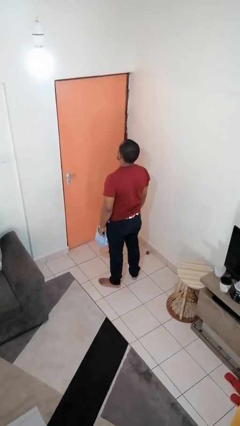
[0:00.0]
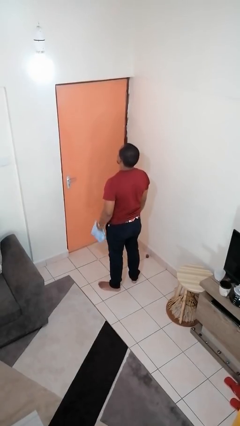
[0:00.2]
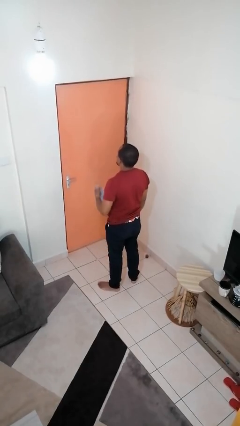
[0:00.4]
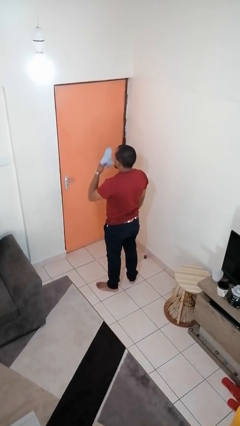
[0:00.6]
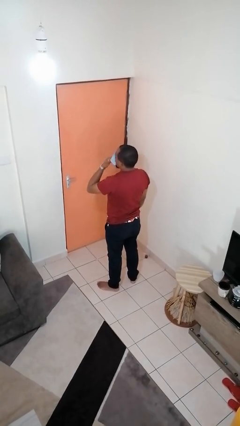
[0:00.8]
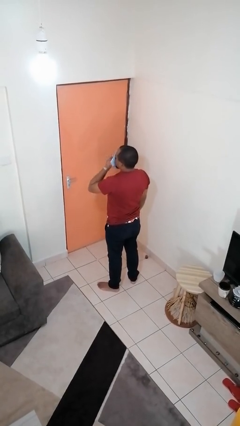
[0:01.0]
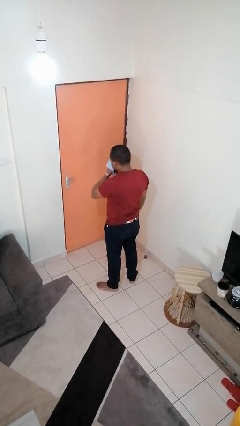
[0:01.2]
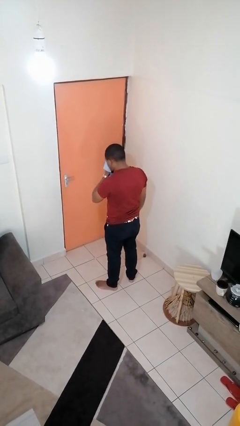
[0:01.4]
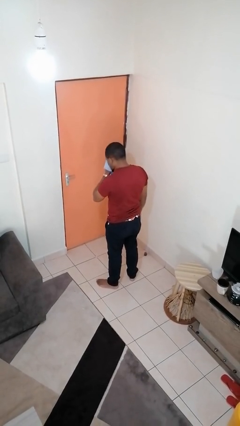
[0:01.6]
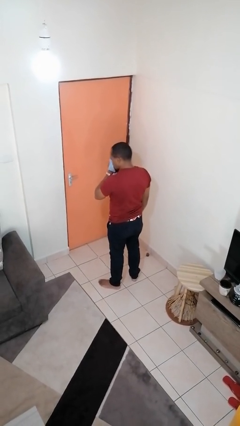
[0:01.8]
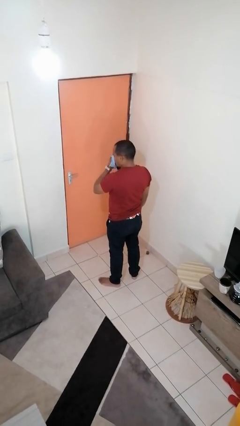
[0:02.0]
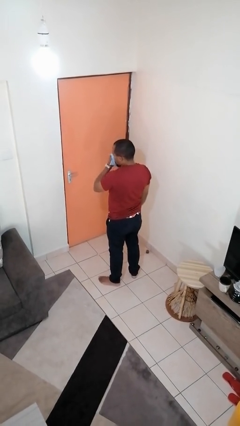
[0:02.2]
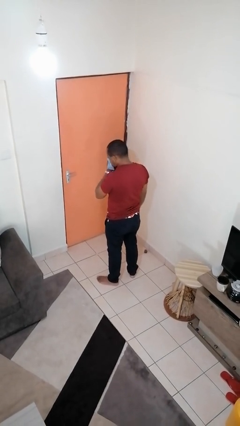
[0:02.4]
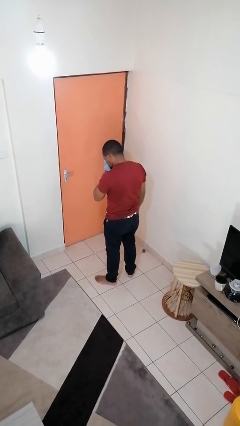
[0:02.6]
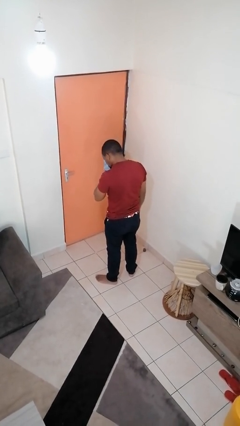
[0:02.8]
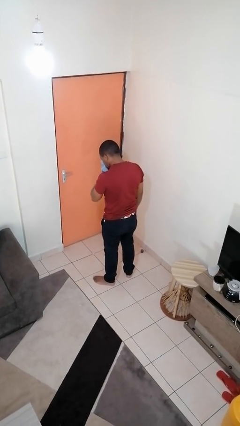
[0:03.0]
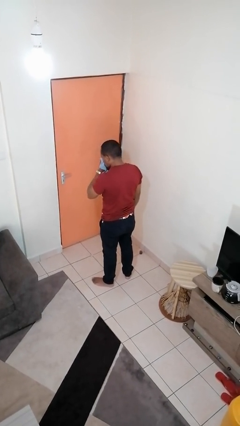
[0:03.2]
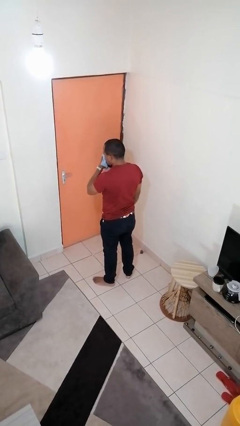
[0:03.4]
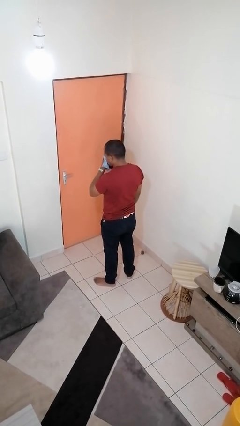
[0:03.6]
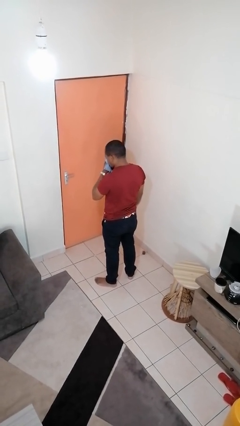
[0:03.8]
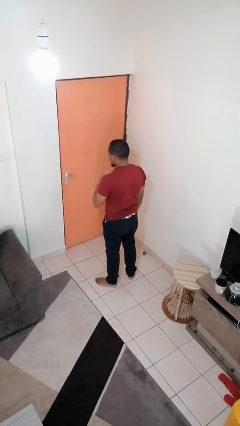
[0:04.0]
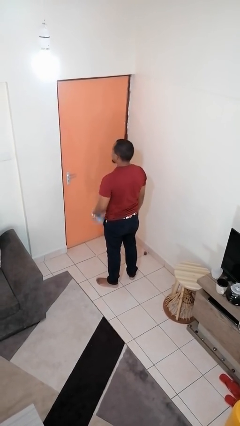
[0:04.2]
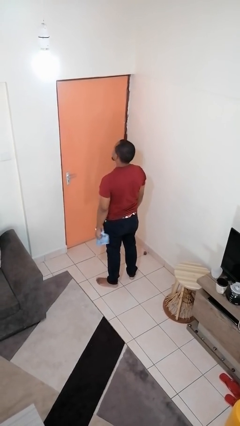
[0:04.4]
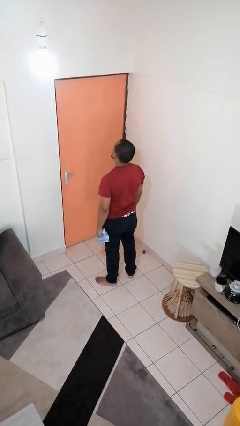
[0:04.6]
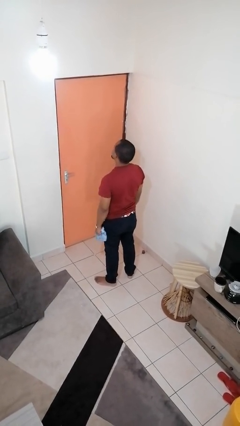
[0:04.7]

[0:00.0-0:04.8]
person blows nose

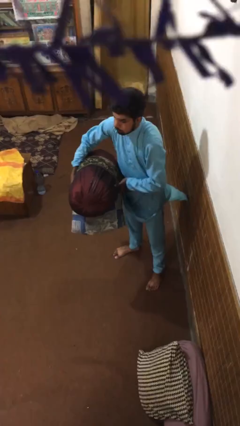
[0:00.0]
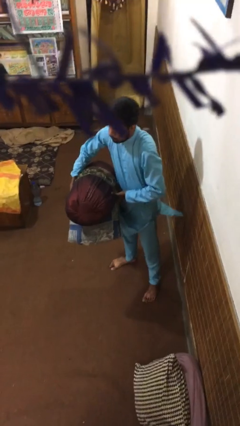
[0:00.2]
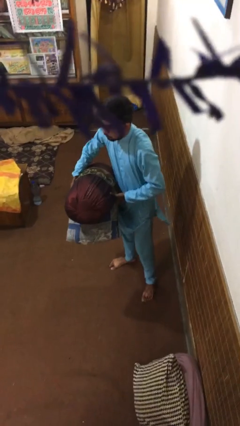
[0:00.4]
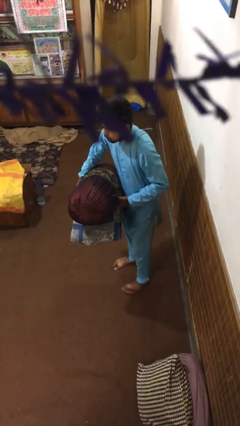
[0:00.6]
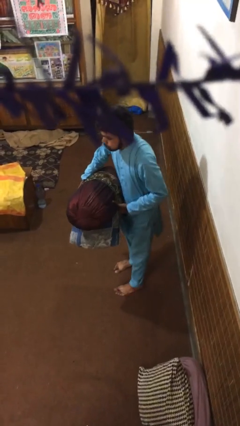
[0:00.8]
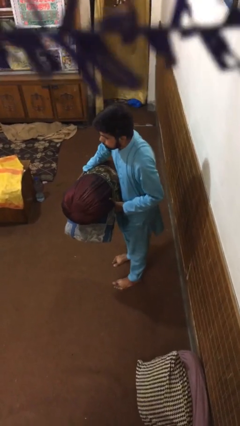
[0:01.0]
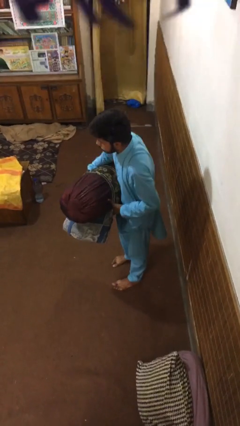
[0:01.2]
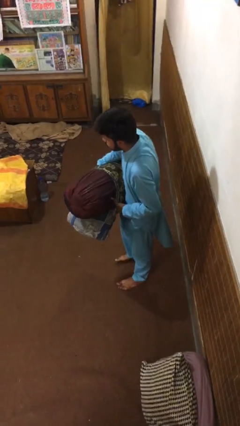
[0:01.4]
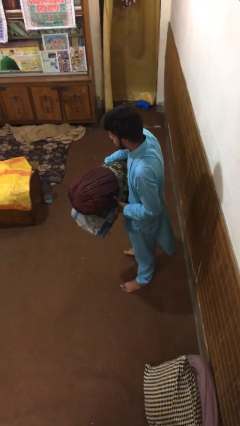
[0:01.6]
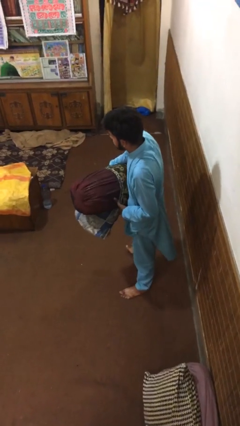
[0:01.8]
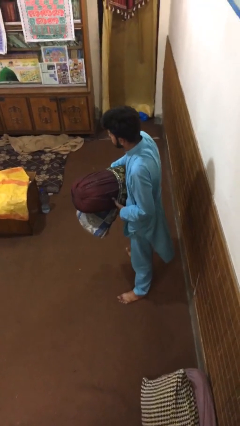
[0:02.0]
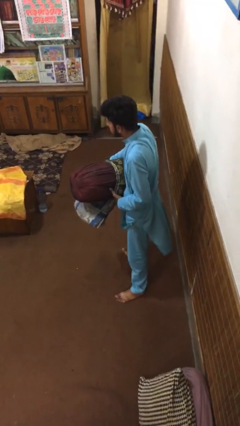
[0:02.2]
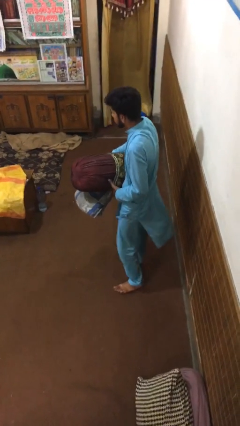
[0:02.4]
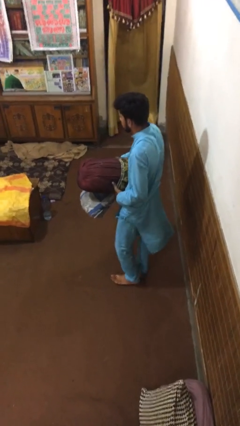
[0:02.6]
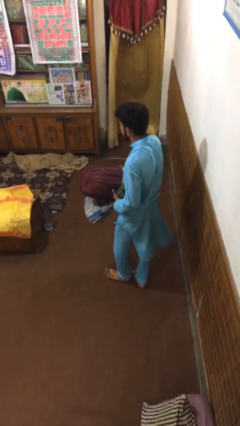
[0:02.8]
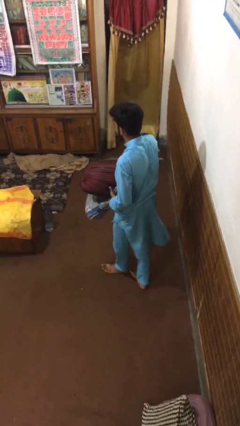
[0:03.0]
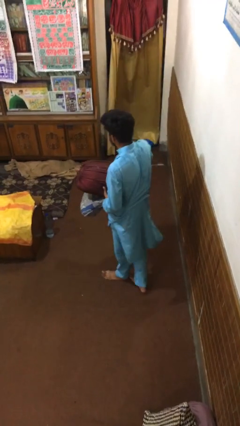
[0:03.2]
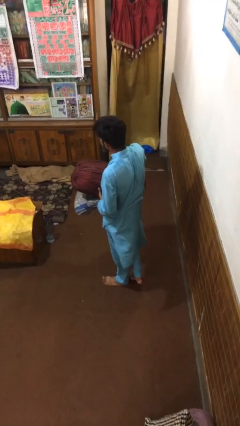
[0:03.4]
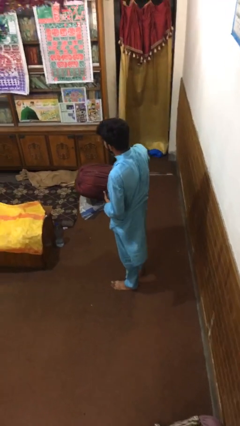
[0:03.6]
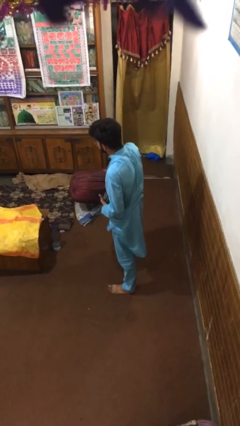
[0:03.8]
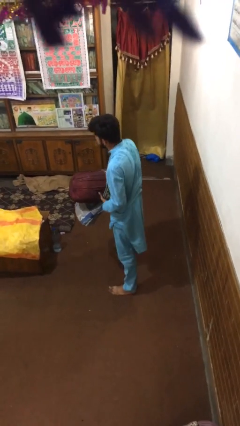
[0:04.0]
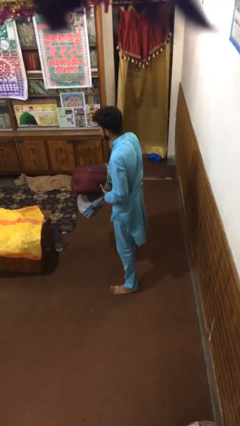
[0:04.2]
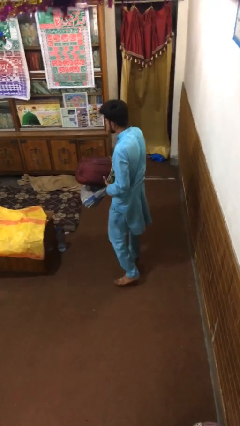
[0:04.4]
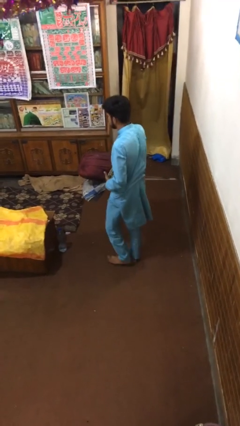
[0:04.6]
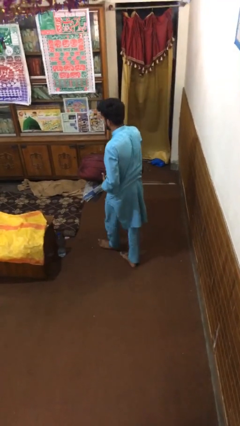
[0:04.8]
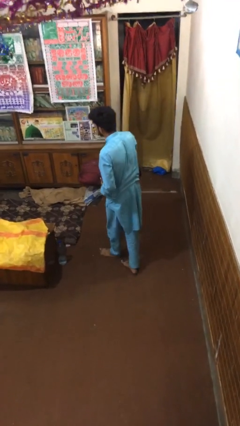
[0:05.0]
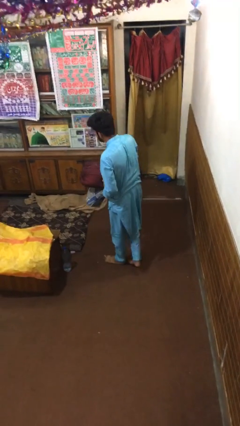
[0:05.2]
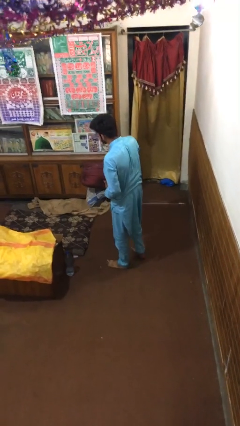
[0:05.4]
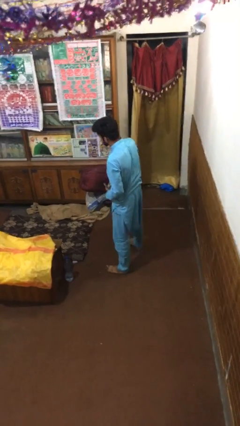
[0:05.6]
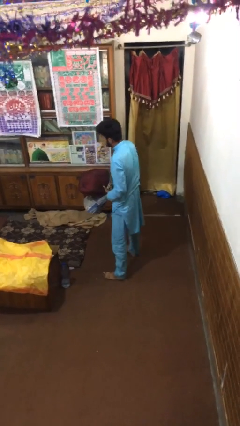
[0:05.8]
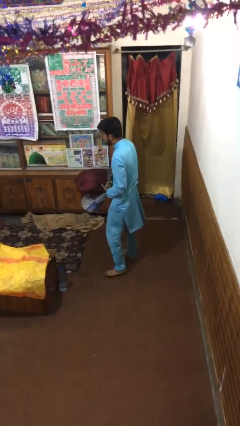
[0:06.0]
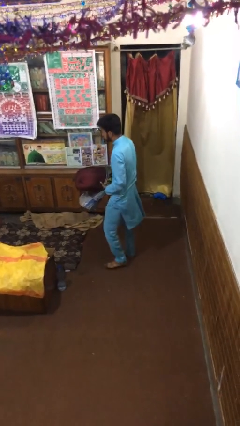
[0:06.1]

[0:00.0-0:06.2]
person carries heavy object

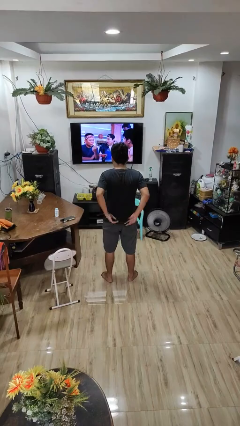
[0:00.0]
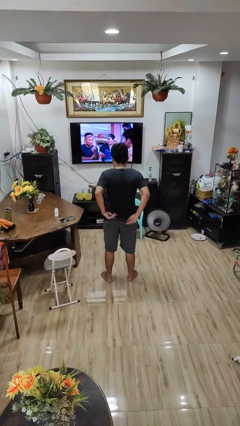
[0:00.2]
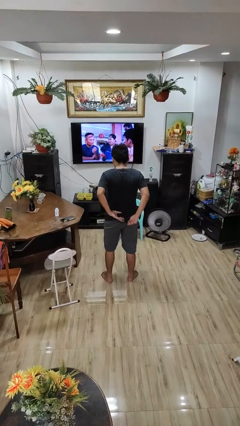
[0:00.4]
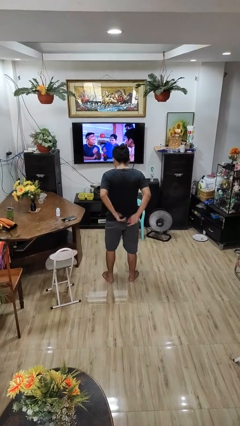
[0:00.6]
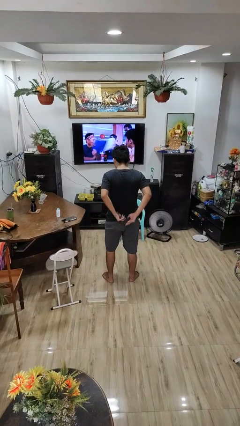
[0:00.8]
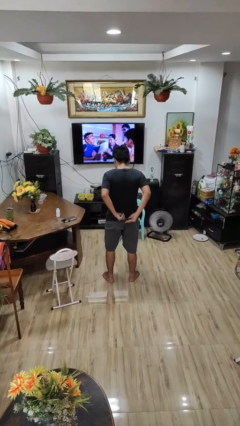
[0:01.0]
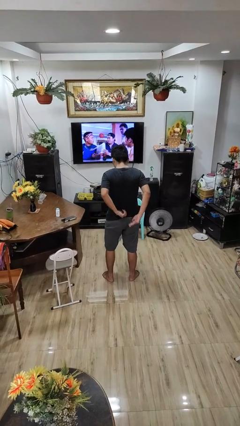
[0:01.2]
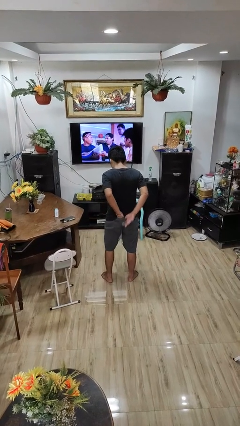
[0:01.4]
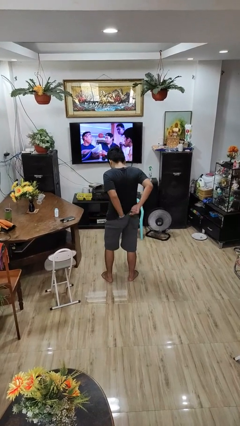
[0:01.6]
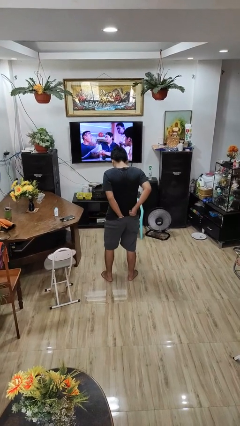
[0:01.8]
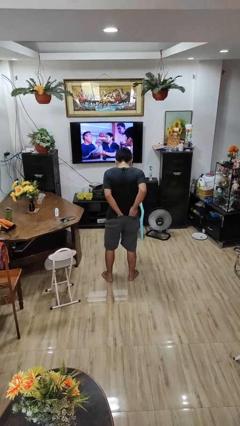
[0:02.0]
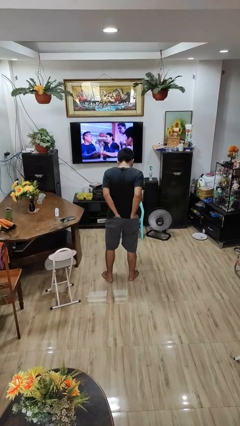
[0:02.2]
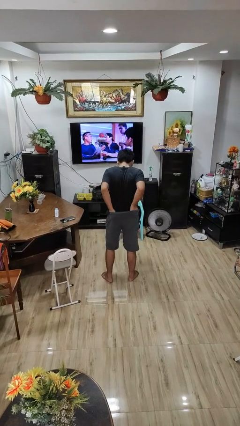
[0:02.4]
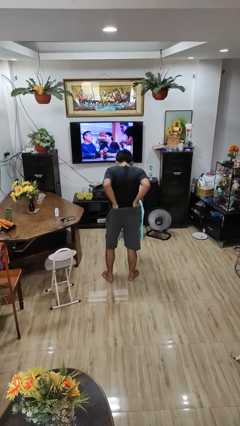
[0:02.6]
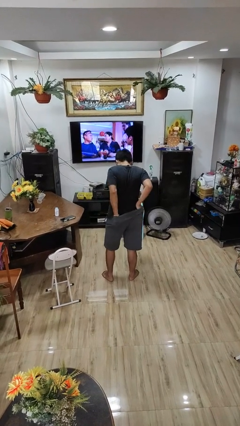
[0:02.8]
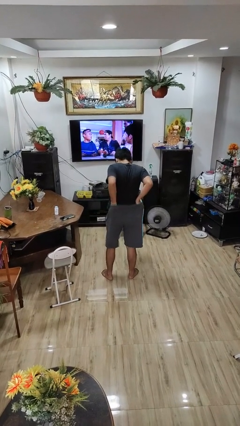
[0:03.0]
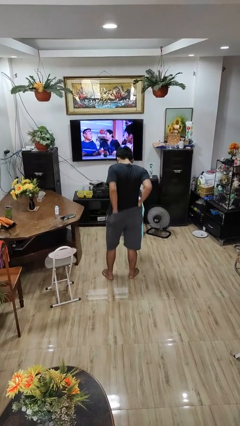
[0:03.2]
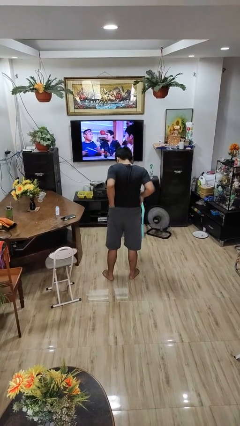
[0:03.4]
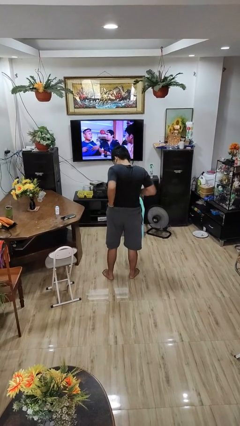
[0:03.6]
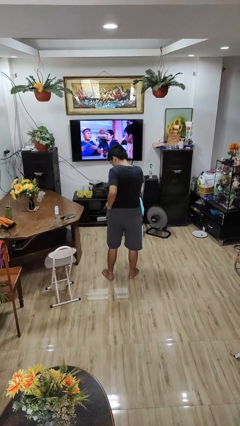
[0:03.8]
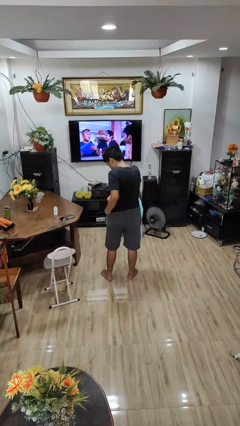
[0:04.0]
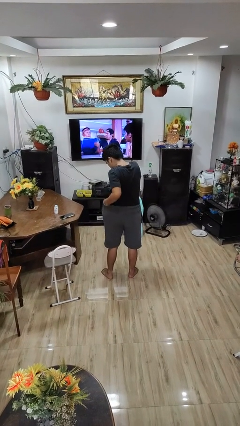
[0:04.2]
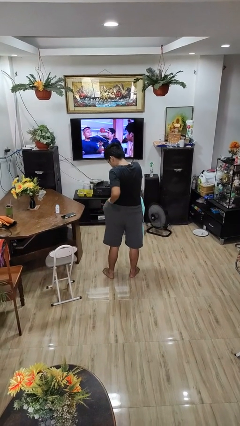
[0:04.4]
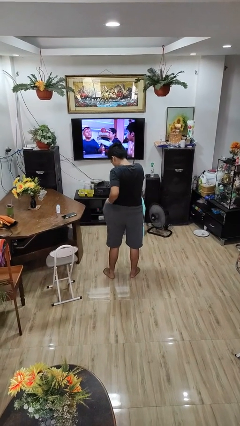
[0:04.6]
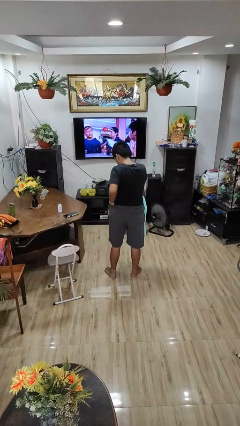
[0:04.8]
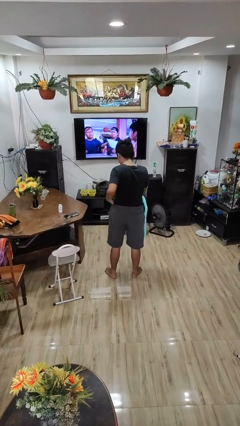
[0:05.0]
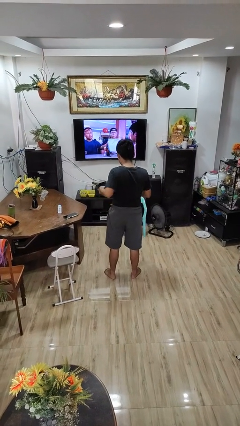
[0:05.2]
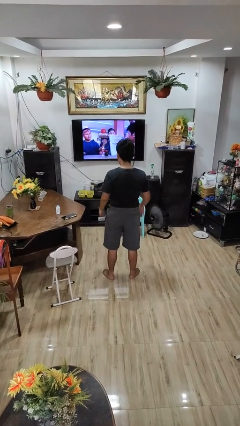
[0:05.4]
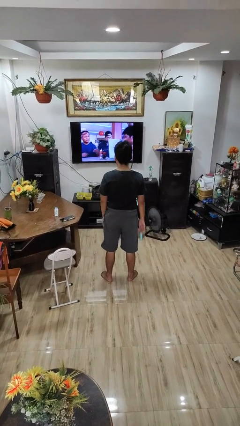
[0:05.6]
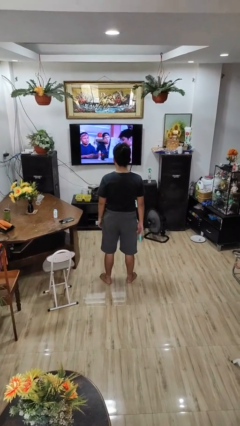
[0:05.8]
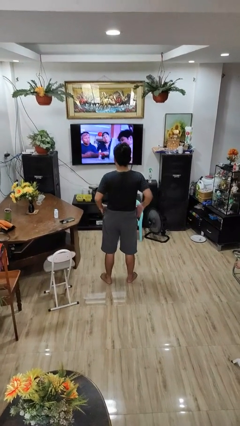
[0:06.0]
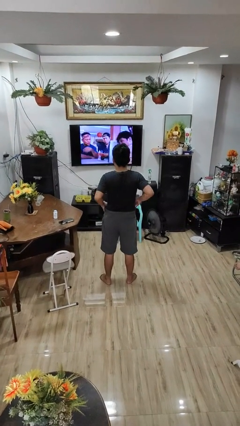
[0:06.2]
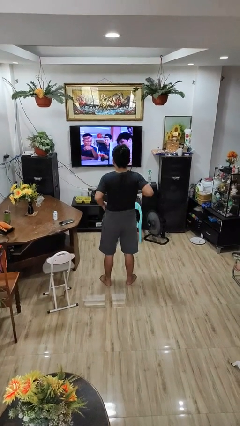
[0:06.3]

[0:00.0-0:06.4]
person tucks in shirt

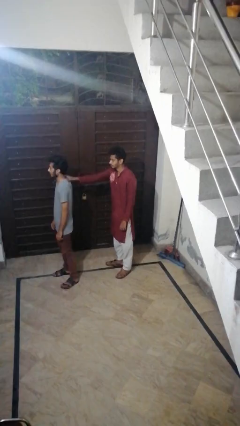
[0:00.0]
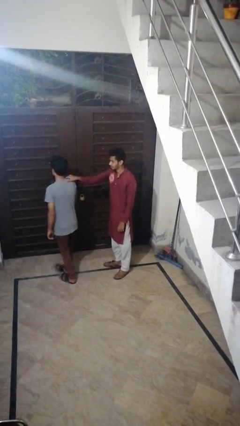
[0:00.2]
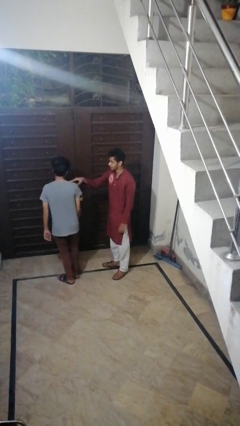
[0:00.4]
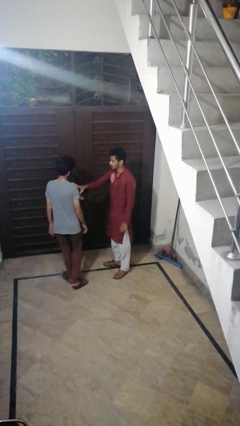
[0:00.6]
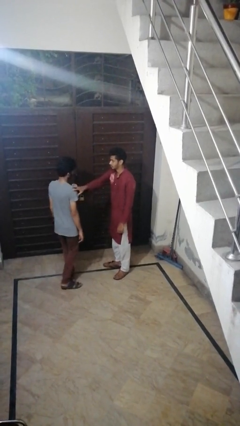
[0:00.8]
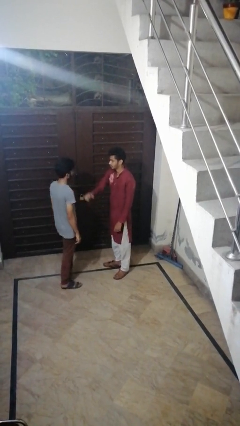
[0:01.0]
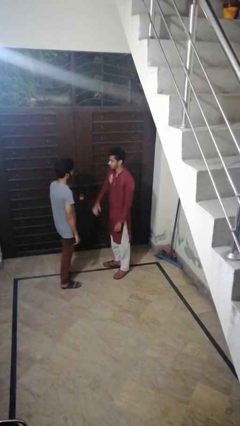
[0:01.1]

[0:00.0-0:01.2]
person spins person around
